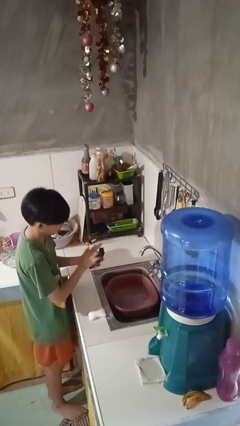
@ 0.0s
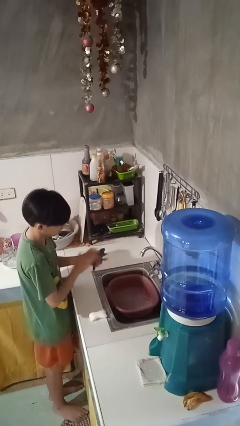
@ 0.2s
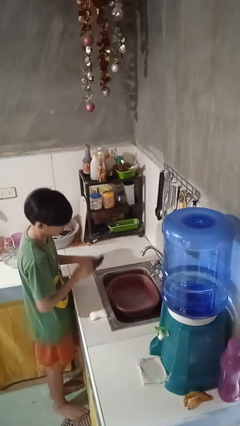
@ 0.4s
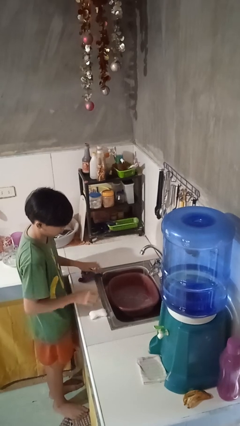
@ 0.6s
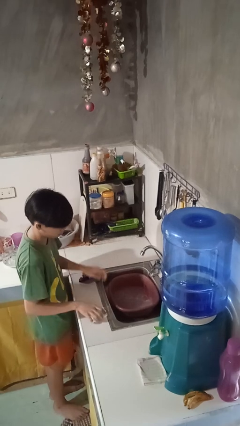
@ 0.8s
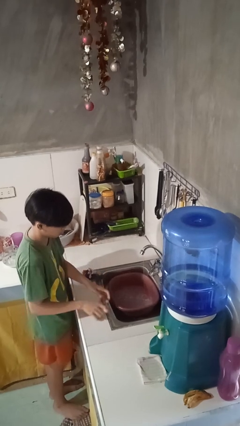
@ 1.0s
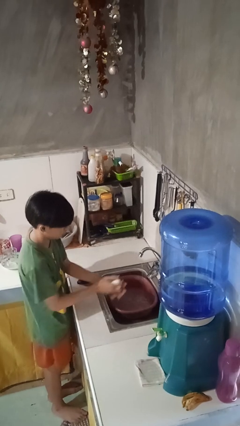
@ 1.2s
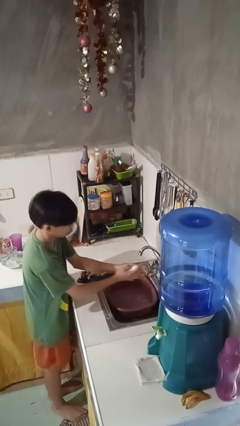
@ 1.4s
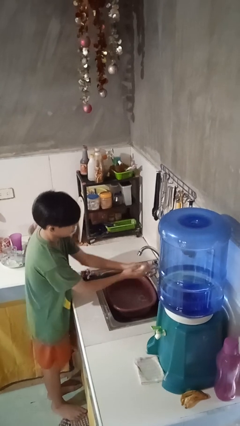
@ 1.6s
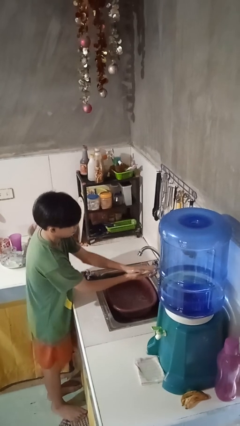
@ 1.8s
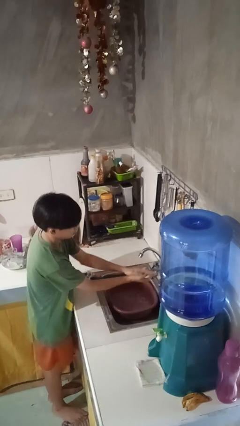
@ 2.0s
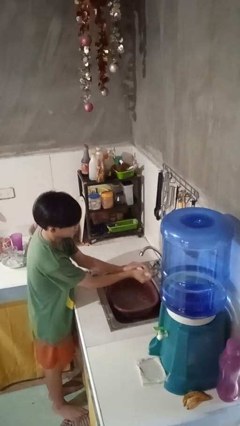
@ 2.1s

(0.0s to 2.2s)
person washes hands

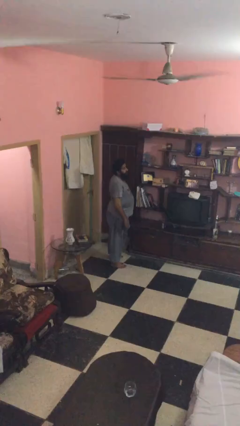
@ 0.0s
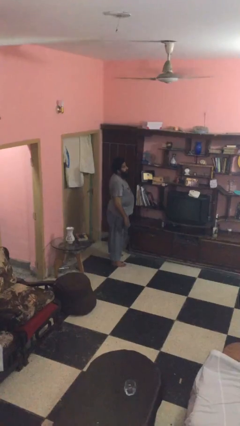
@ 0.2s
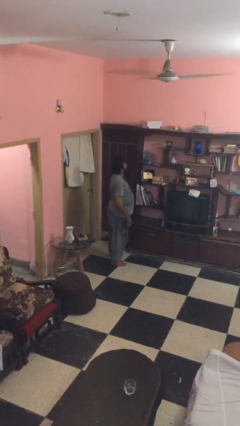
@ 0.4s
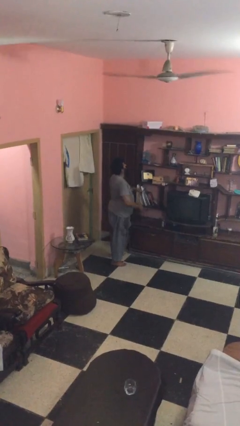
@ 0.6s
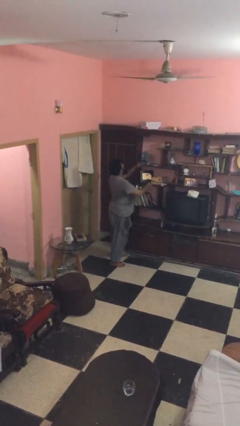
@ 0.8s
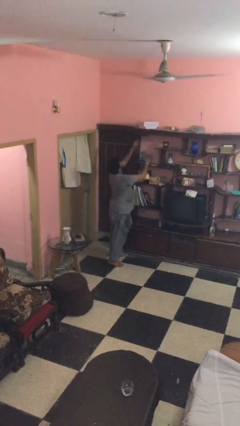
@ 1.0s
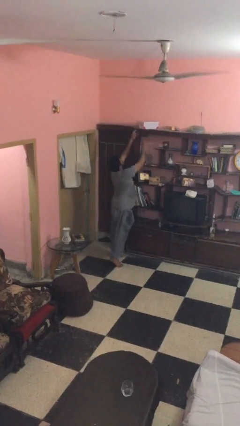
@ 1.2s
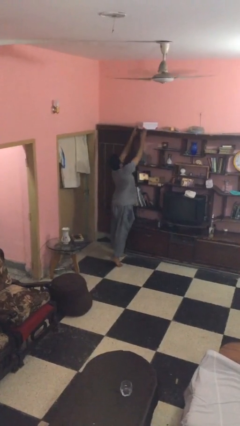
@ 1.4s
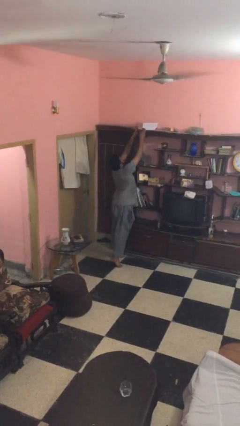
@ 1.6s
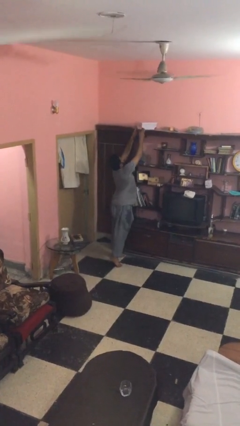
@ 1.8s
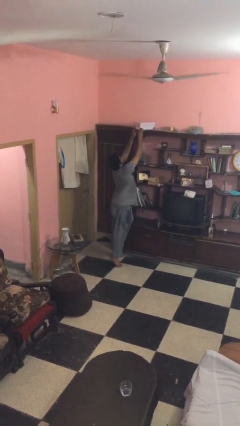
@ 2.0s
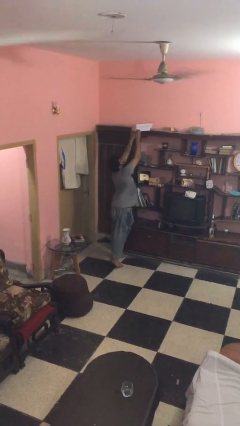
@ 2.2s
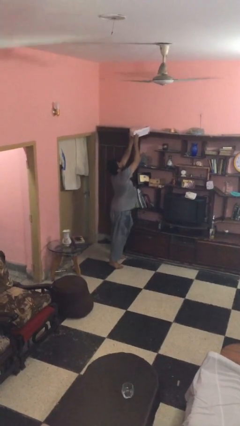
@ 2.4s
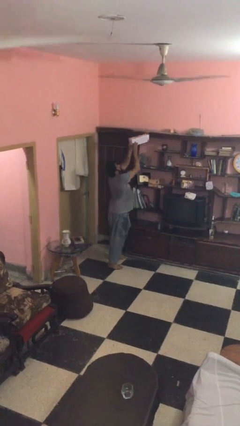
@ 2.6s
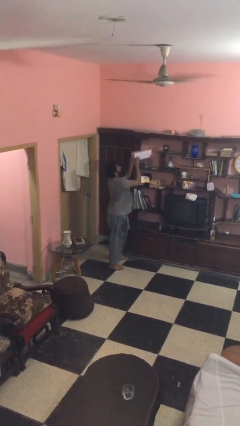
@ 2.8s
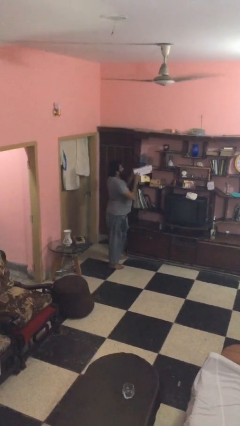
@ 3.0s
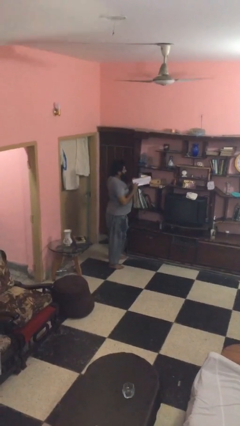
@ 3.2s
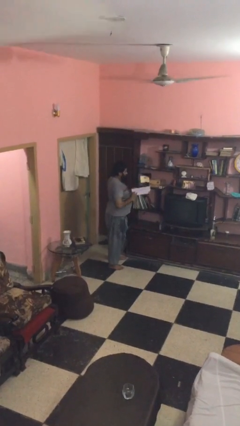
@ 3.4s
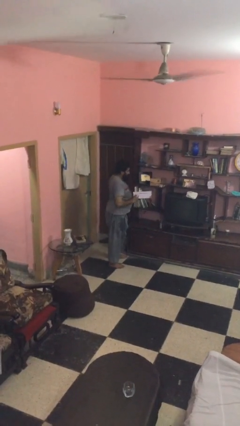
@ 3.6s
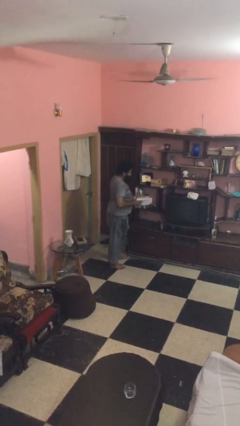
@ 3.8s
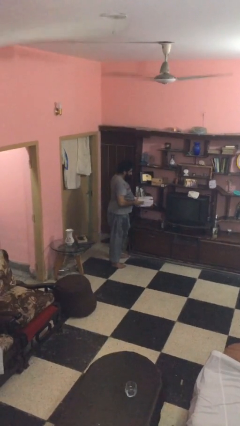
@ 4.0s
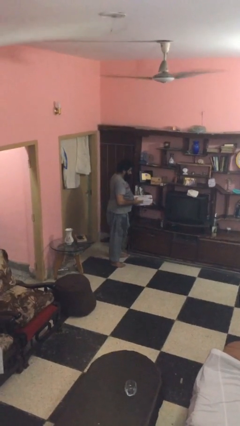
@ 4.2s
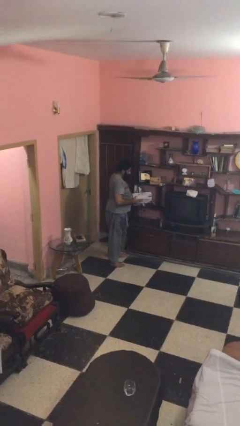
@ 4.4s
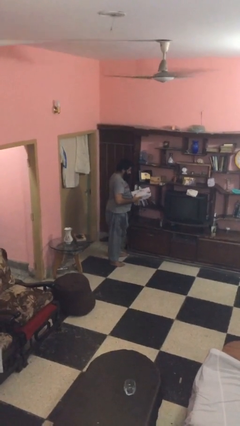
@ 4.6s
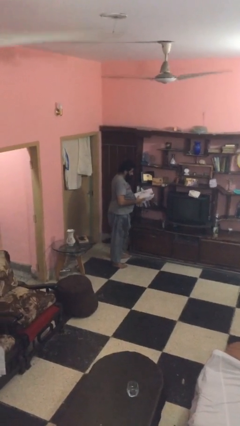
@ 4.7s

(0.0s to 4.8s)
person picks up object from shelf

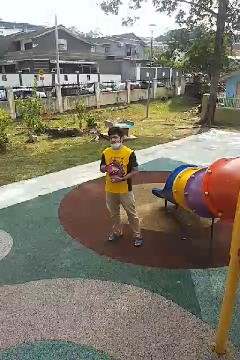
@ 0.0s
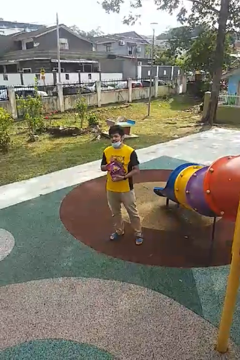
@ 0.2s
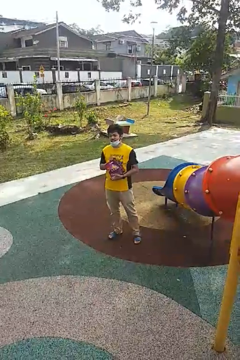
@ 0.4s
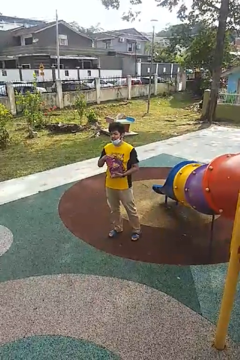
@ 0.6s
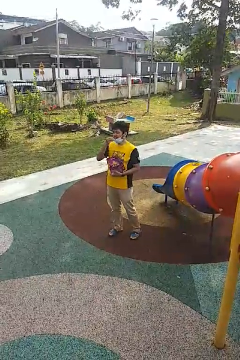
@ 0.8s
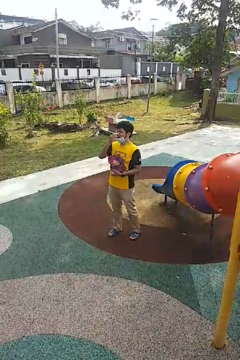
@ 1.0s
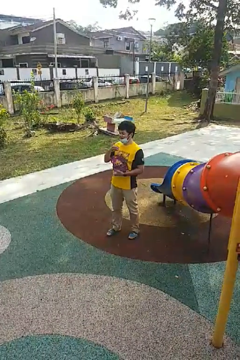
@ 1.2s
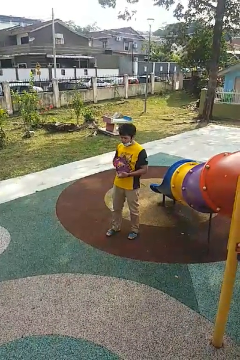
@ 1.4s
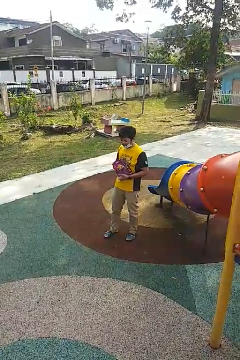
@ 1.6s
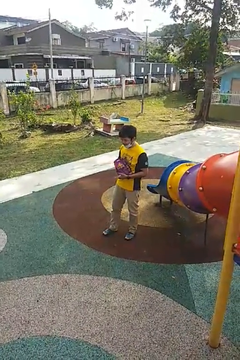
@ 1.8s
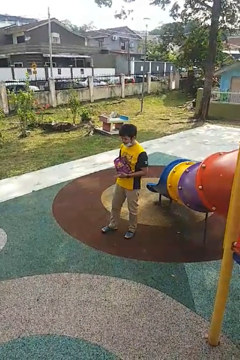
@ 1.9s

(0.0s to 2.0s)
person eats snack from bag

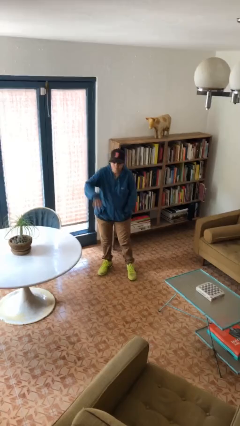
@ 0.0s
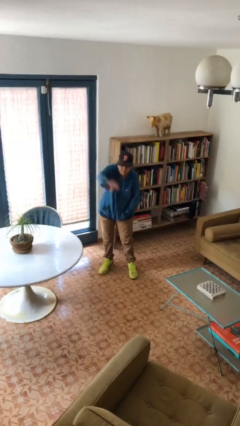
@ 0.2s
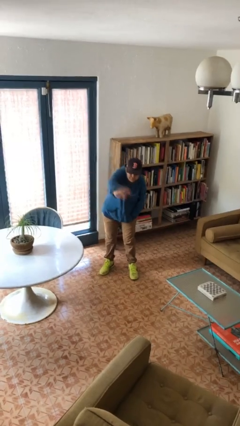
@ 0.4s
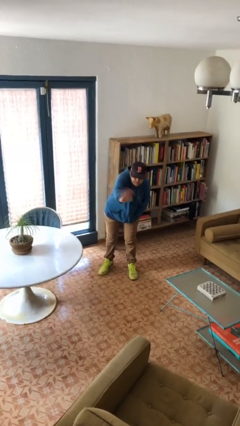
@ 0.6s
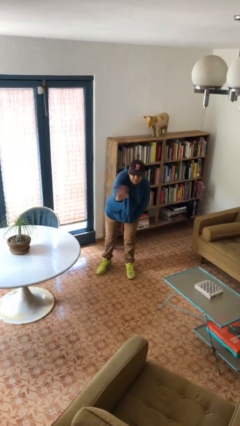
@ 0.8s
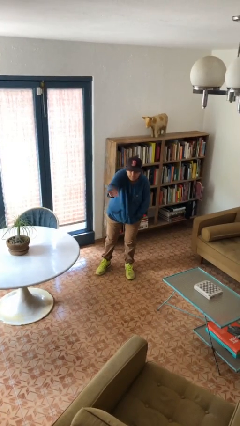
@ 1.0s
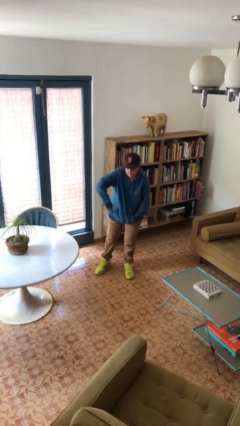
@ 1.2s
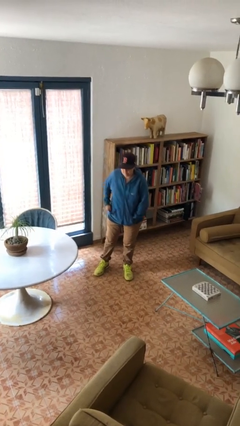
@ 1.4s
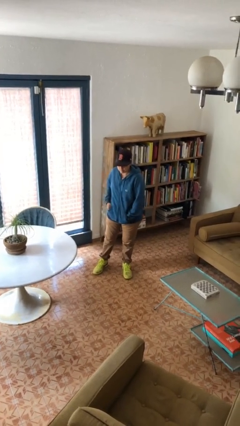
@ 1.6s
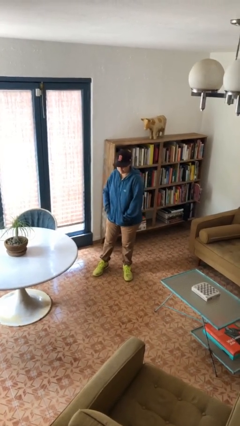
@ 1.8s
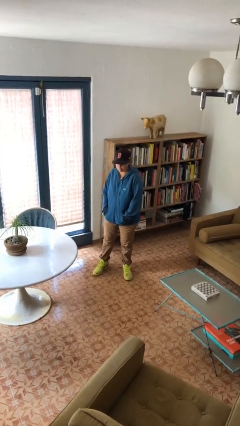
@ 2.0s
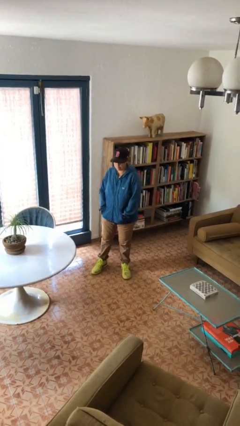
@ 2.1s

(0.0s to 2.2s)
person waves at person

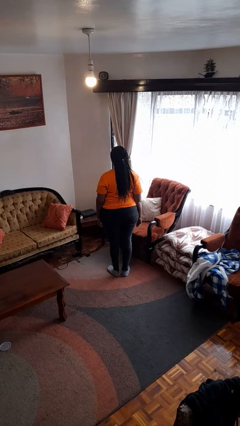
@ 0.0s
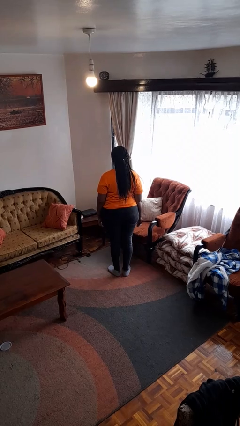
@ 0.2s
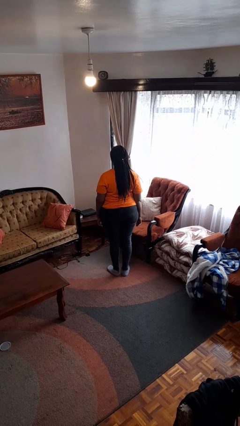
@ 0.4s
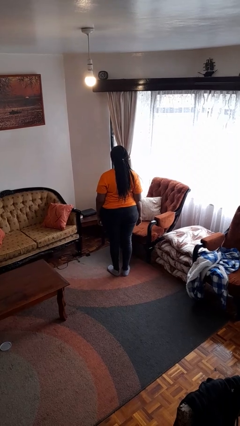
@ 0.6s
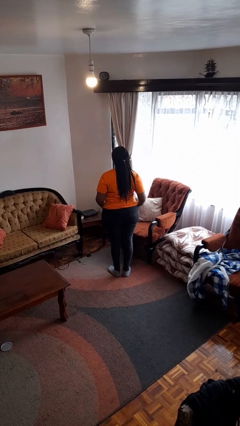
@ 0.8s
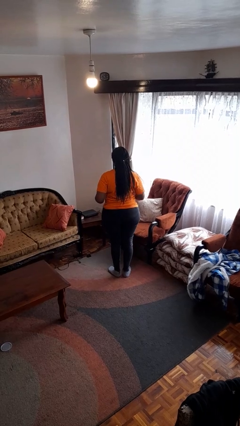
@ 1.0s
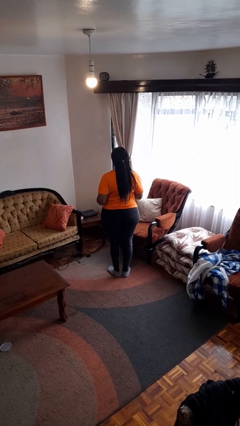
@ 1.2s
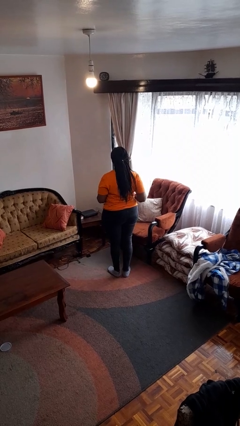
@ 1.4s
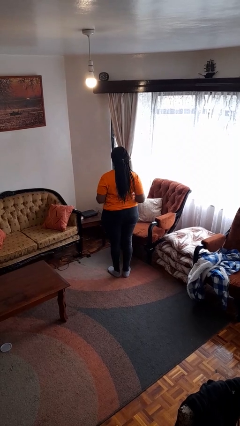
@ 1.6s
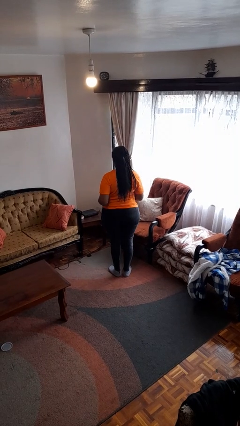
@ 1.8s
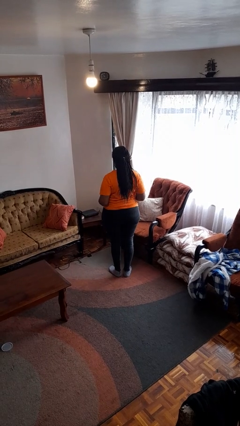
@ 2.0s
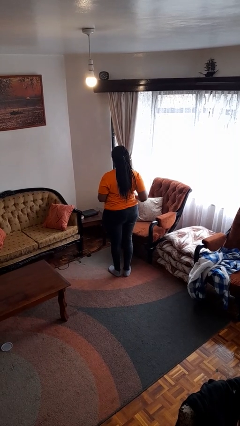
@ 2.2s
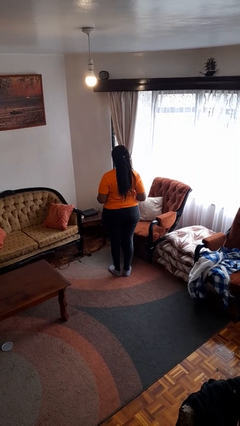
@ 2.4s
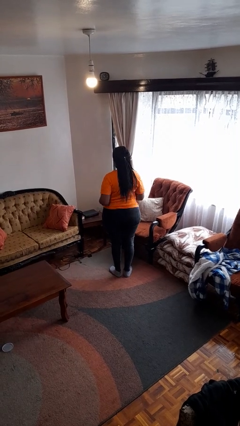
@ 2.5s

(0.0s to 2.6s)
person wiggles hips

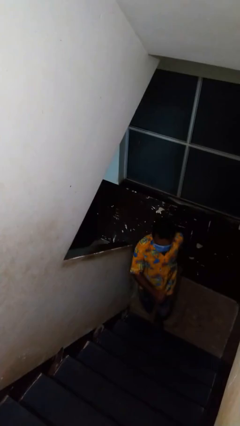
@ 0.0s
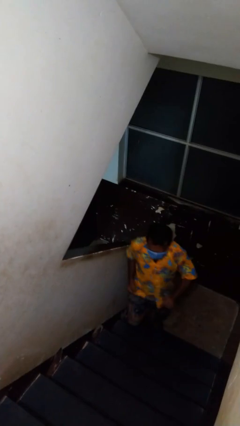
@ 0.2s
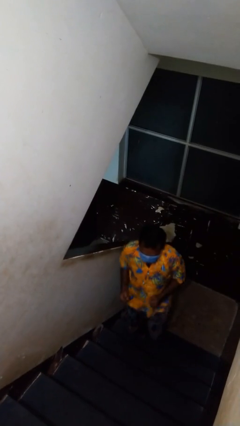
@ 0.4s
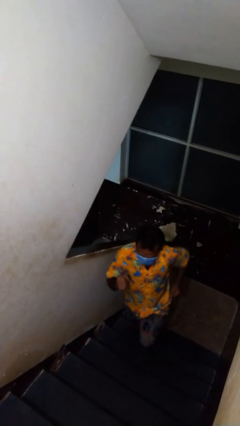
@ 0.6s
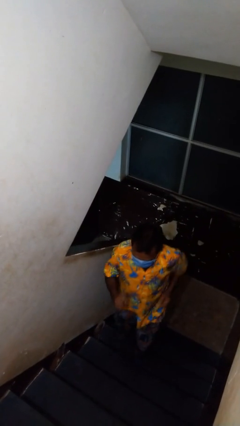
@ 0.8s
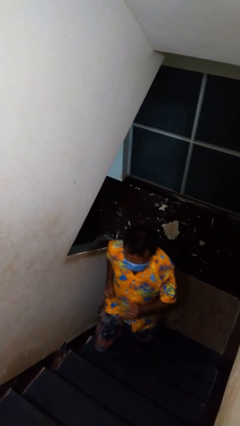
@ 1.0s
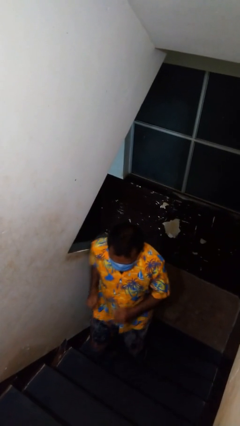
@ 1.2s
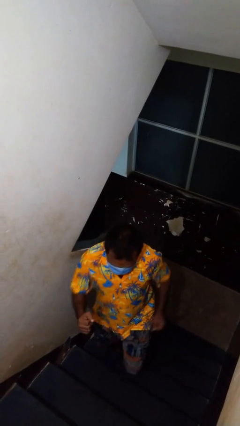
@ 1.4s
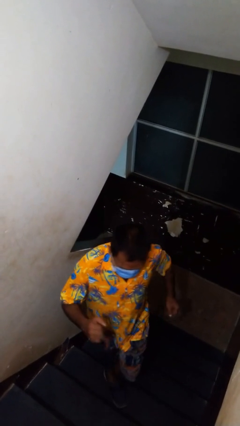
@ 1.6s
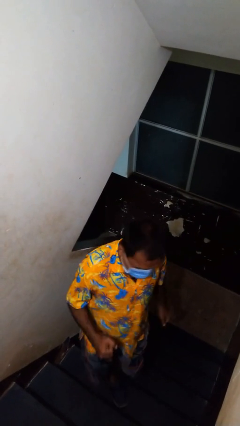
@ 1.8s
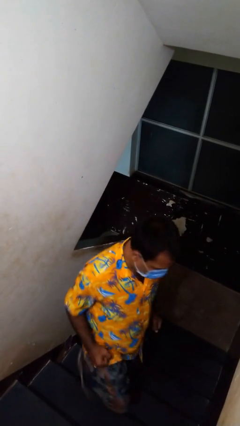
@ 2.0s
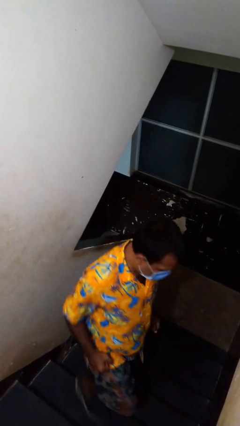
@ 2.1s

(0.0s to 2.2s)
person climbs up stairs

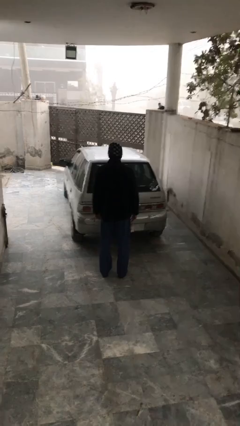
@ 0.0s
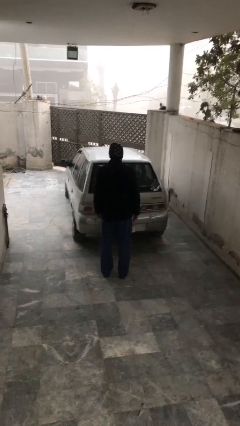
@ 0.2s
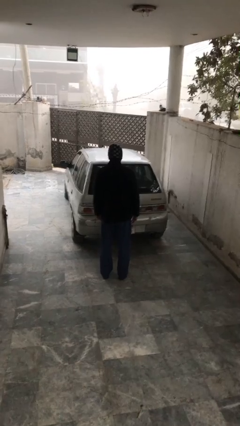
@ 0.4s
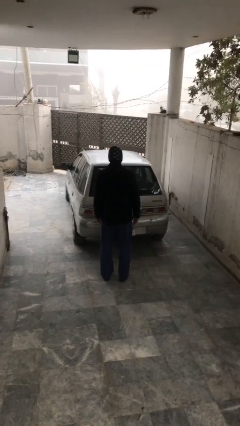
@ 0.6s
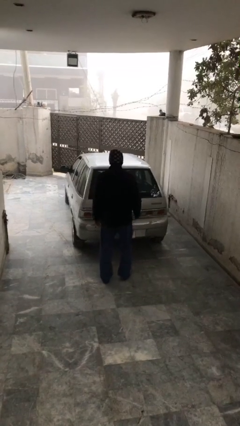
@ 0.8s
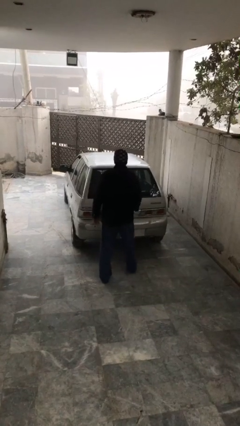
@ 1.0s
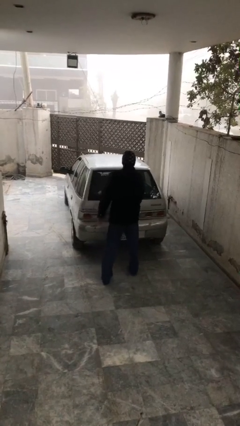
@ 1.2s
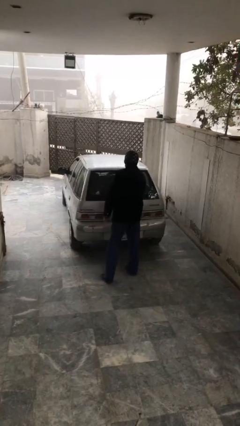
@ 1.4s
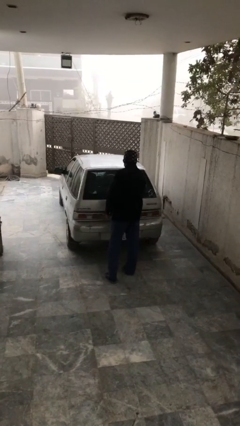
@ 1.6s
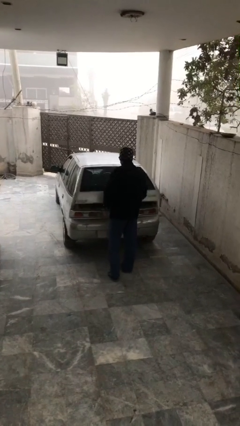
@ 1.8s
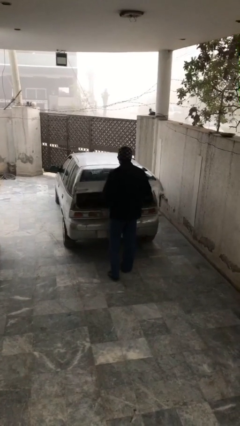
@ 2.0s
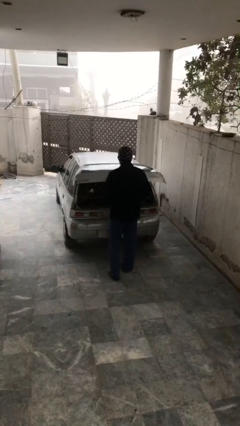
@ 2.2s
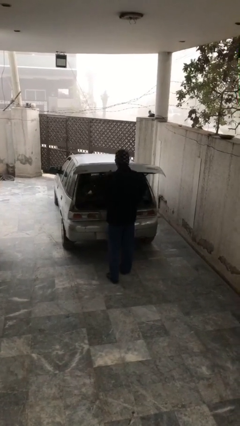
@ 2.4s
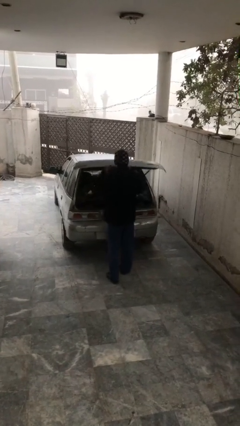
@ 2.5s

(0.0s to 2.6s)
person opens car trunk
